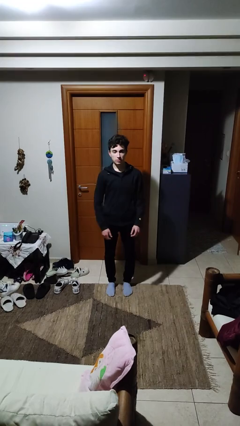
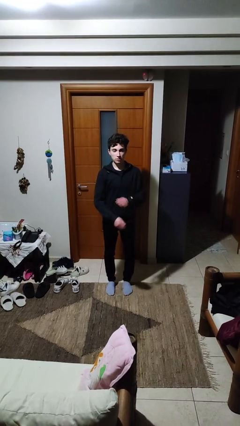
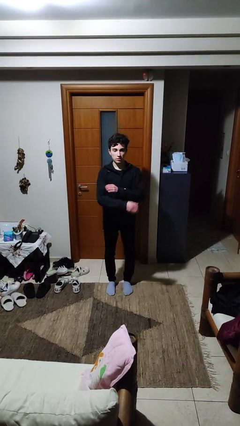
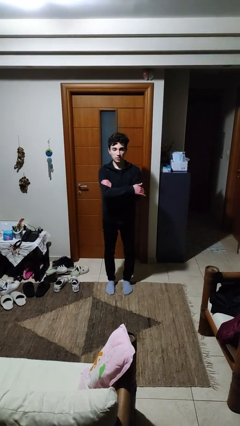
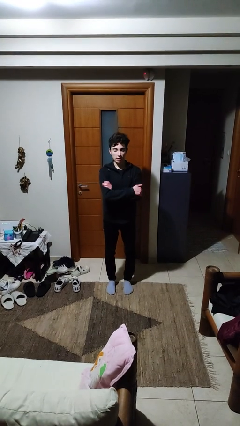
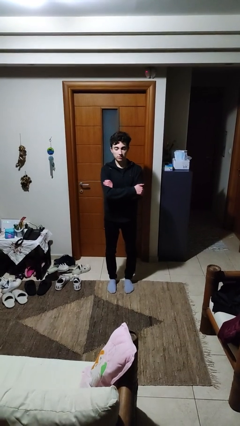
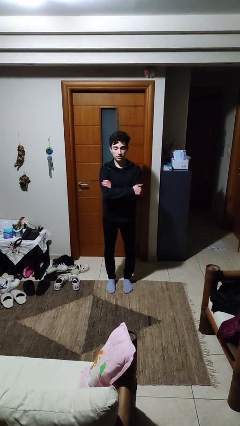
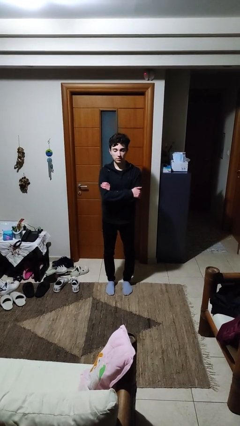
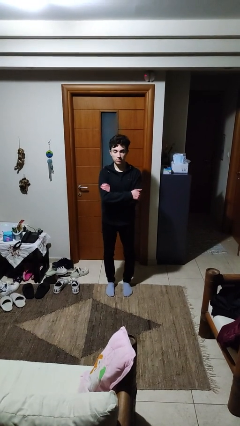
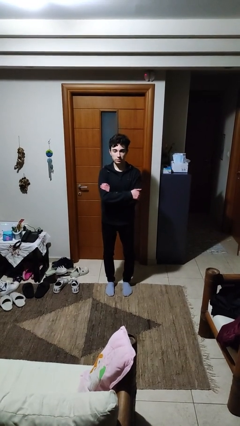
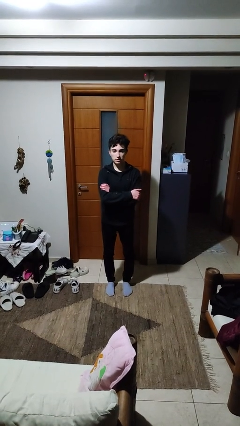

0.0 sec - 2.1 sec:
person crosses arms

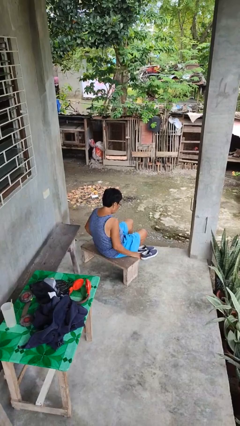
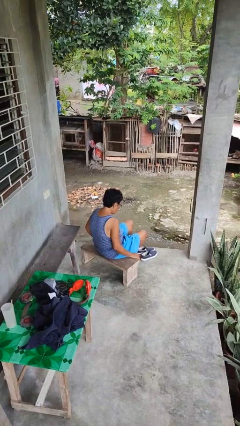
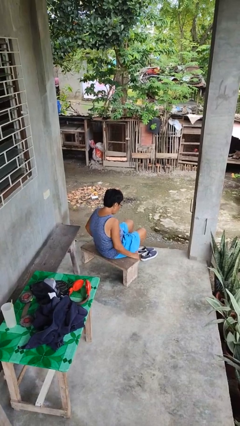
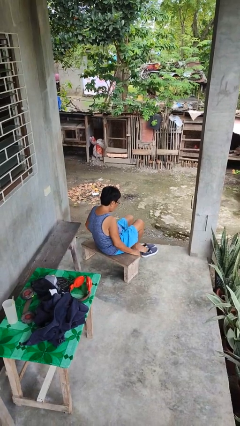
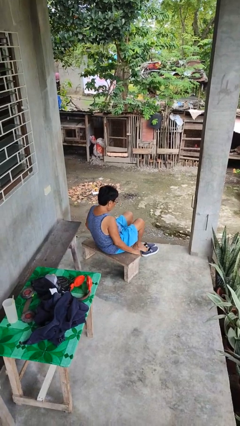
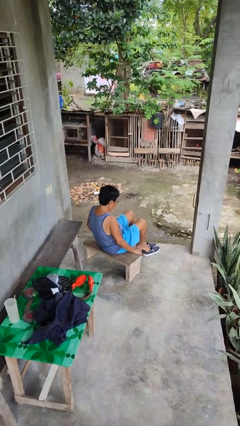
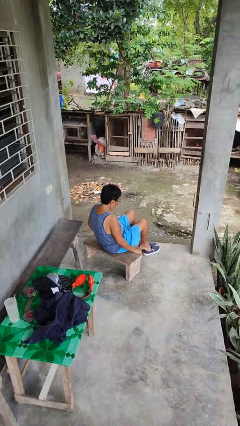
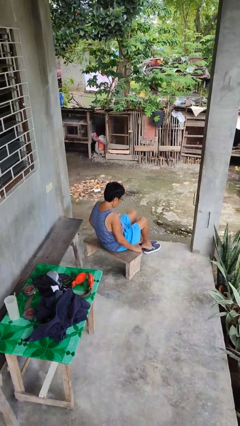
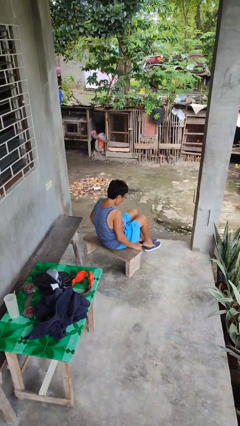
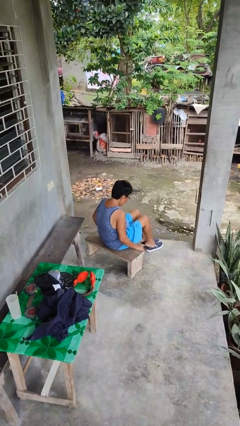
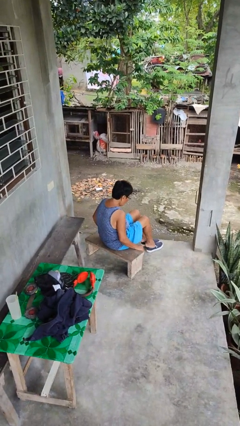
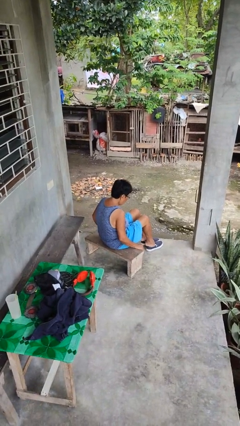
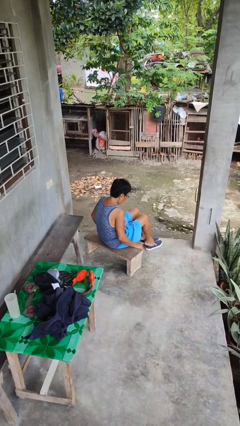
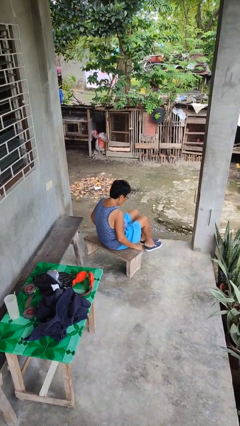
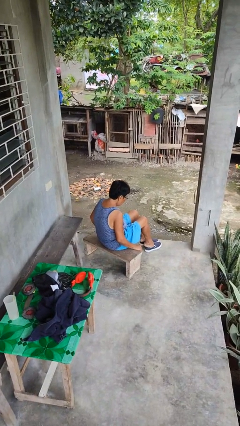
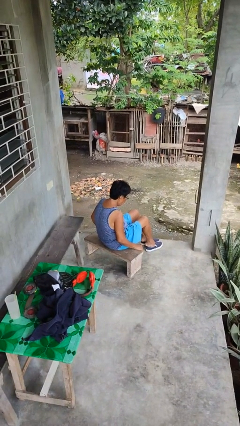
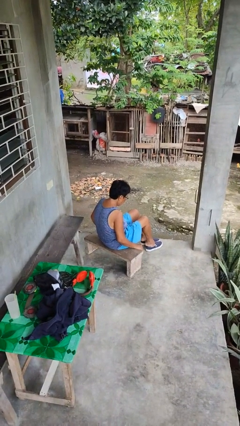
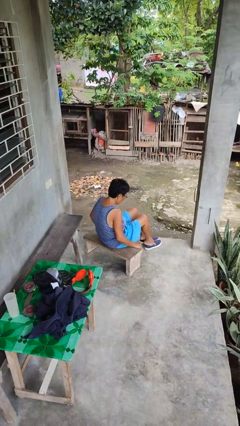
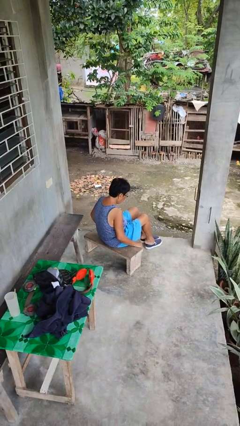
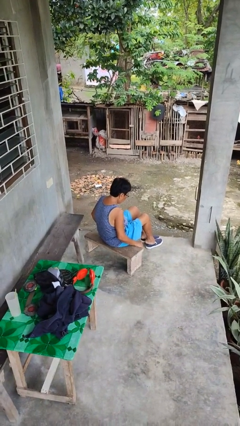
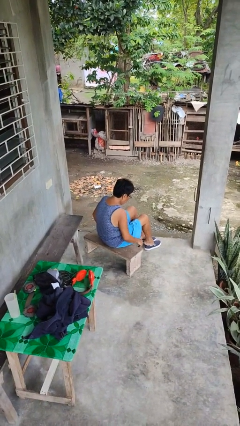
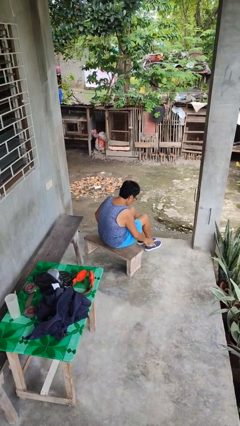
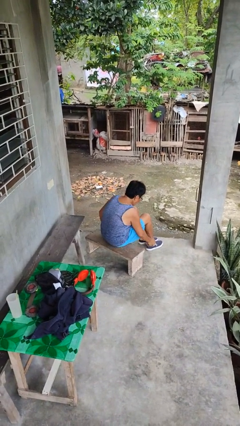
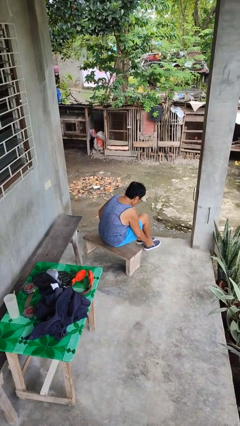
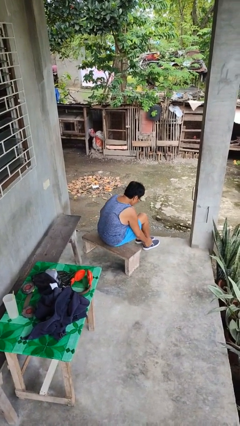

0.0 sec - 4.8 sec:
person puts on shoes

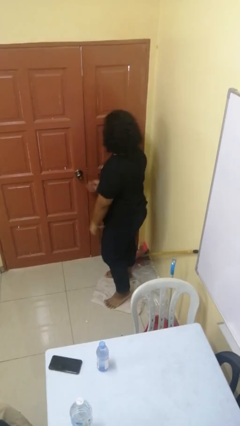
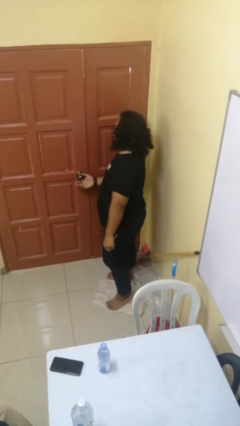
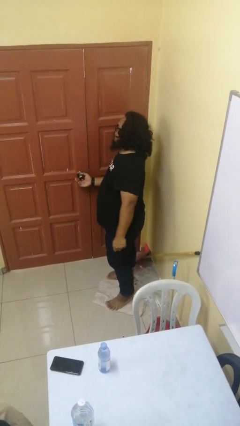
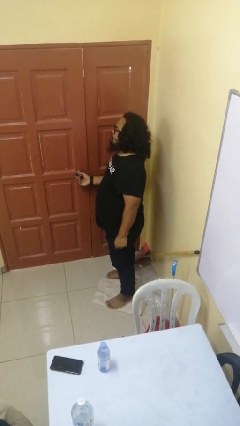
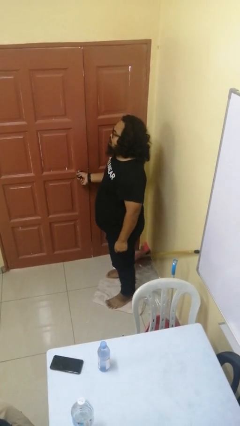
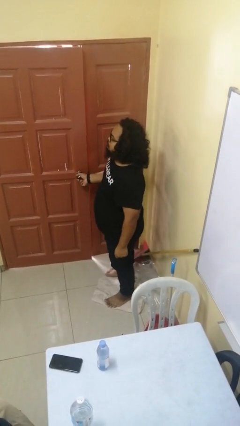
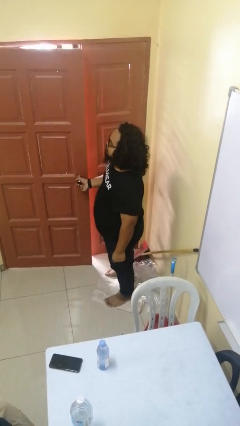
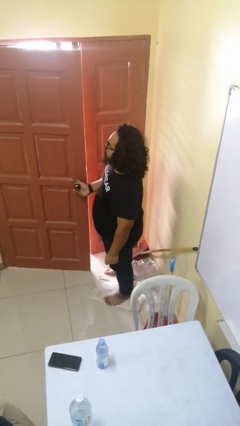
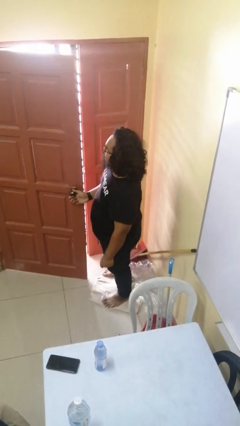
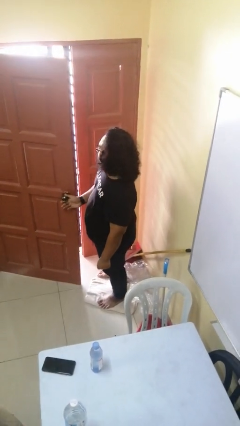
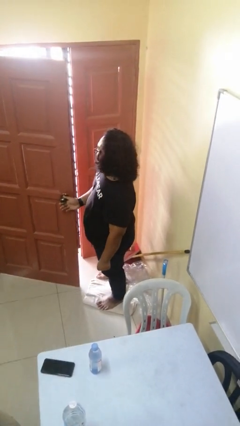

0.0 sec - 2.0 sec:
person opens facility door

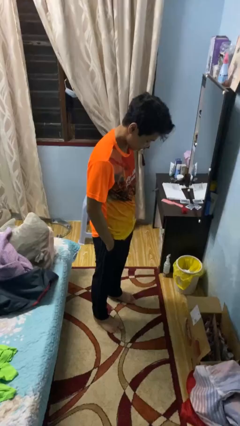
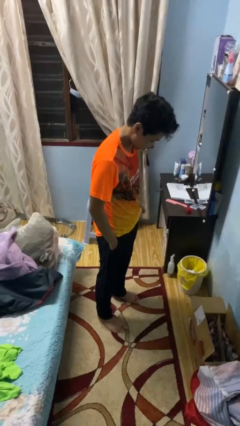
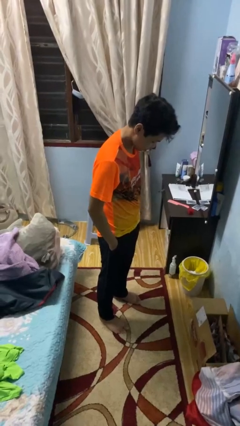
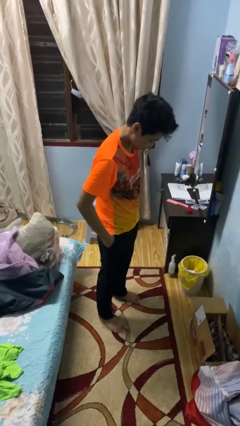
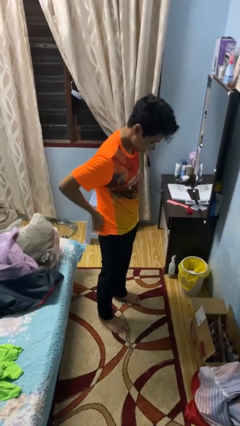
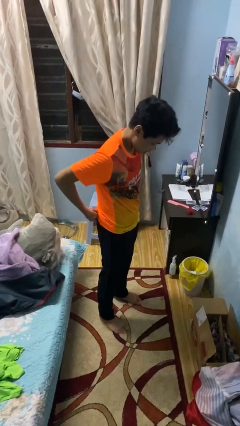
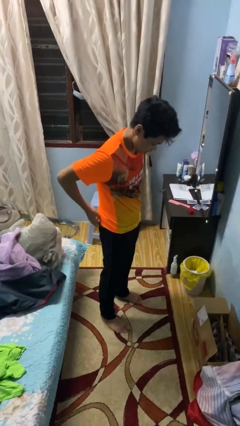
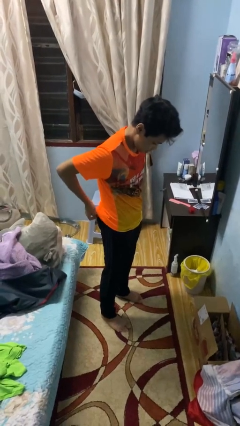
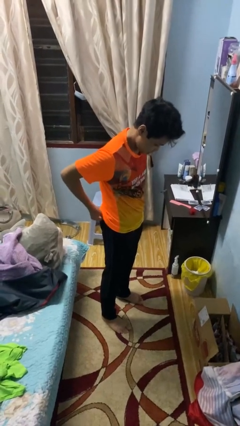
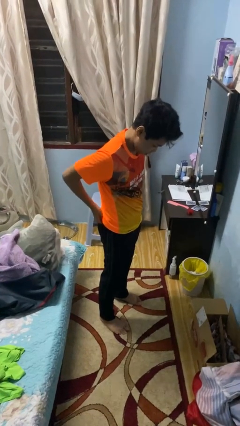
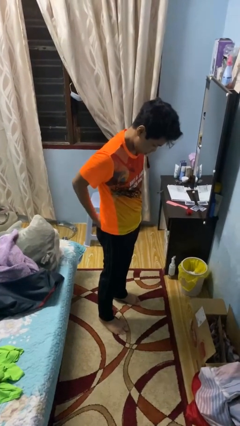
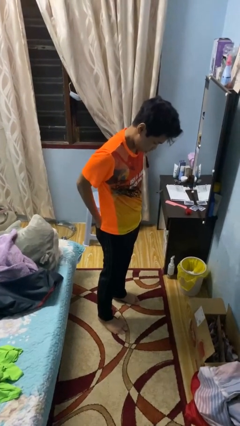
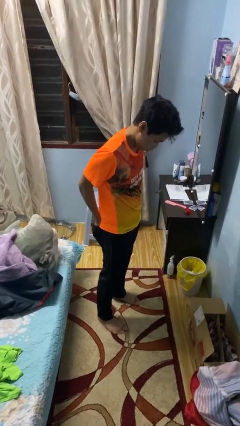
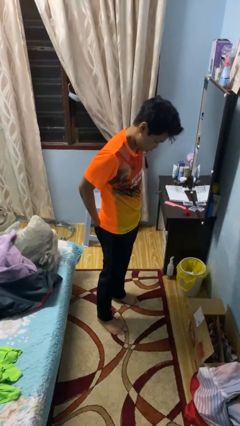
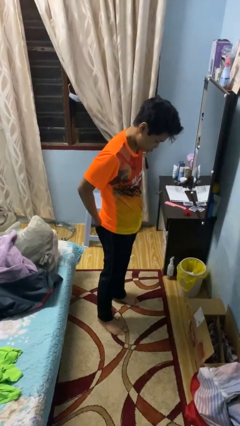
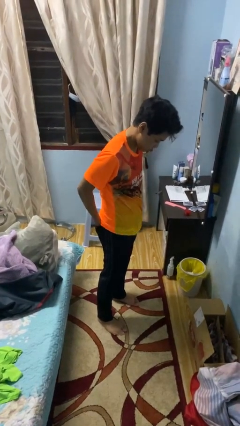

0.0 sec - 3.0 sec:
person puts hands in back pockets

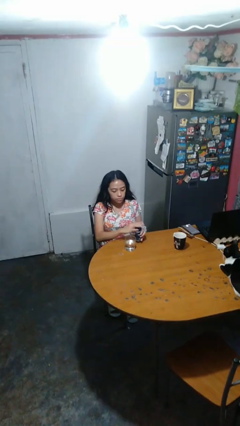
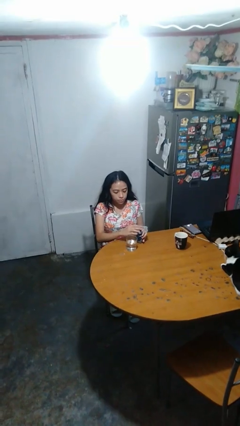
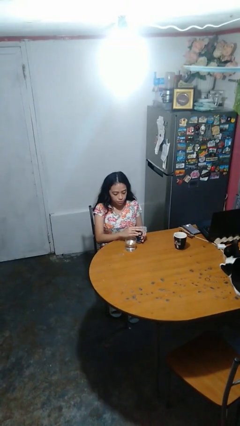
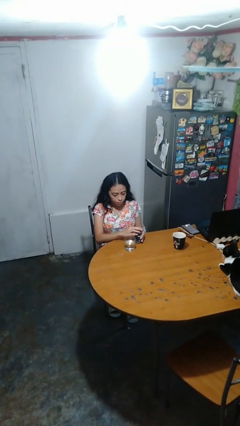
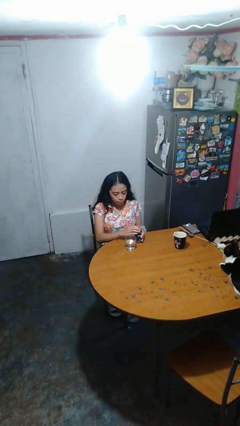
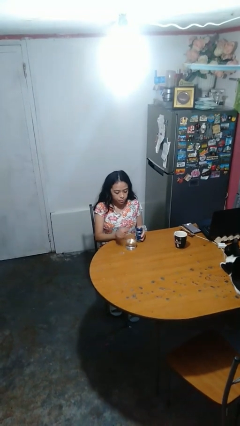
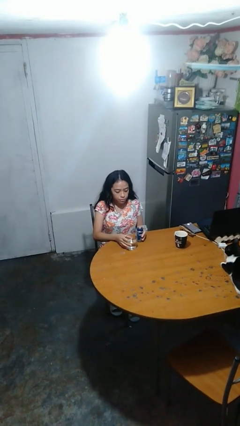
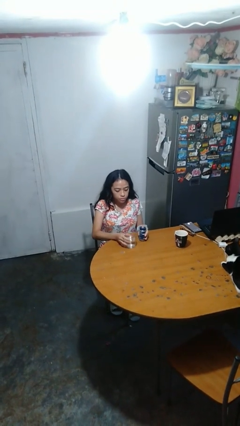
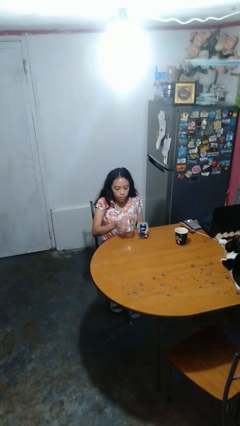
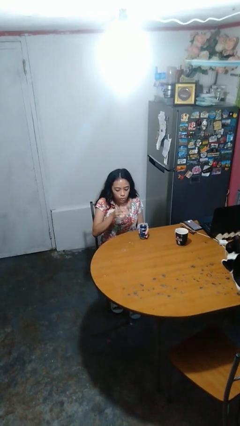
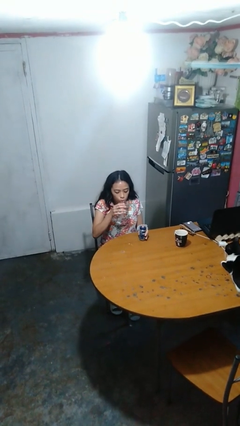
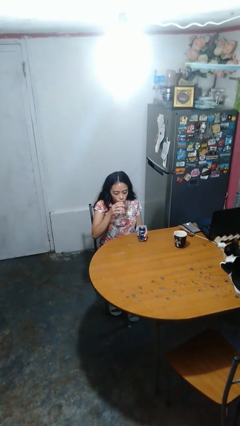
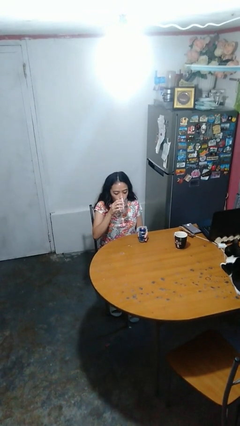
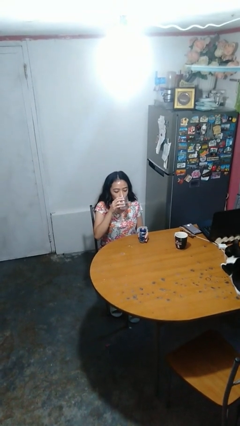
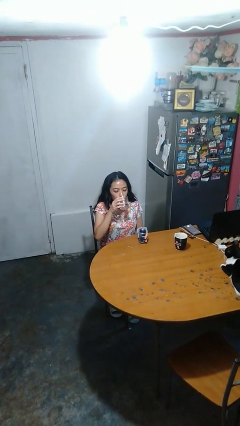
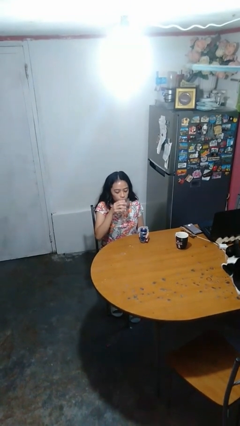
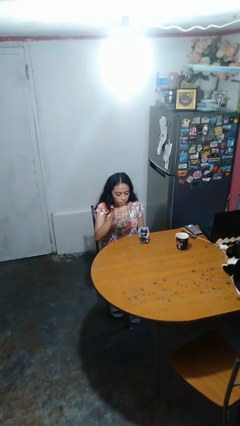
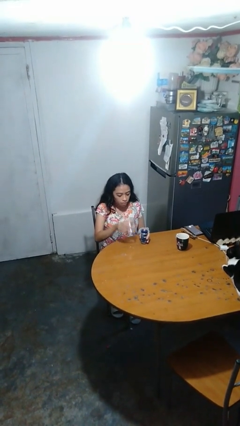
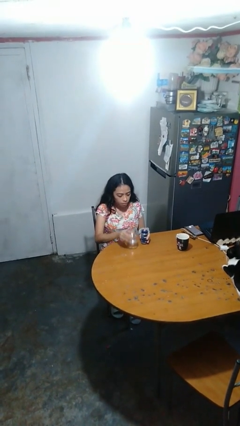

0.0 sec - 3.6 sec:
person drinks from cup

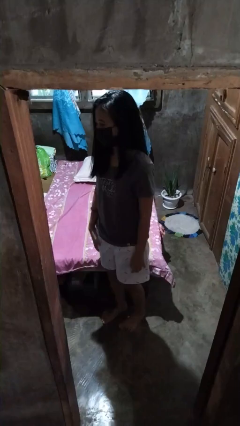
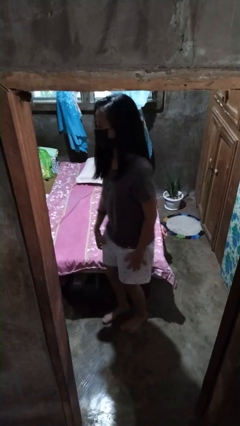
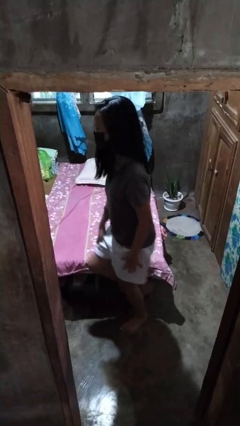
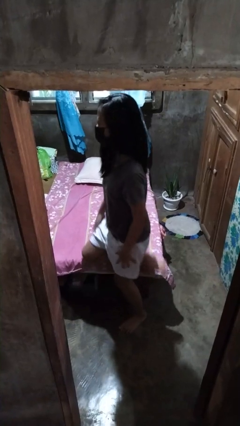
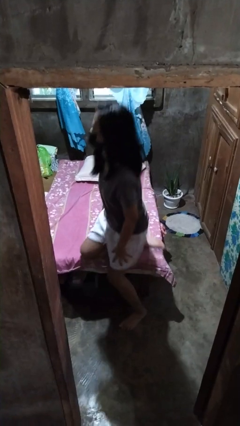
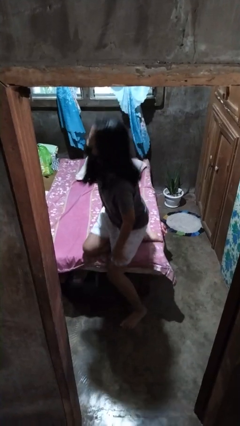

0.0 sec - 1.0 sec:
person lies down on bed

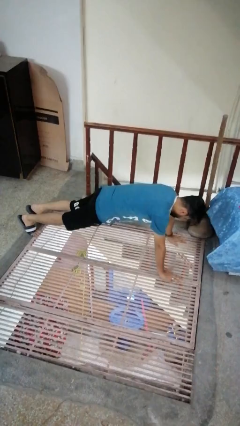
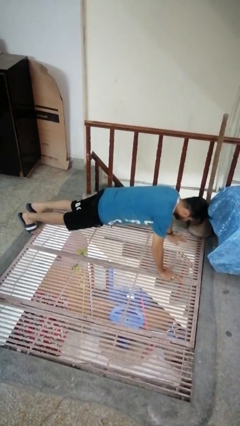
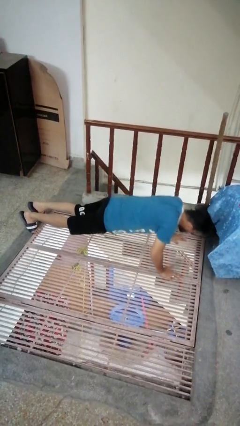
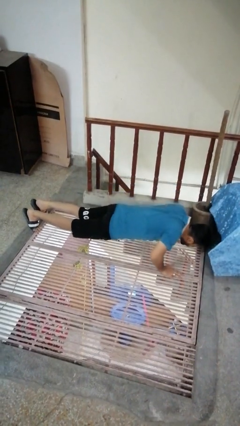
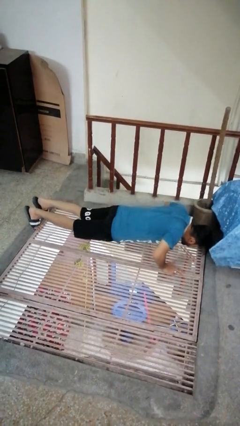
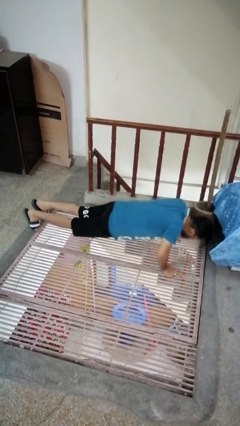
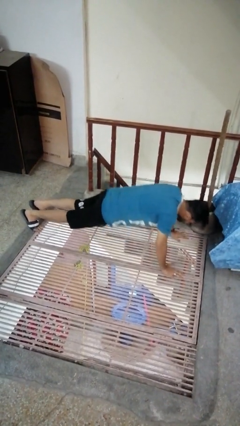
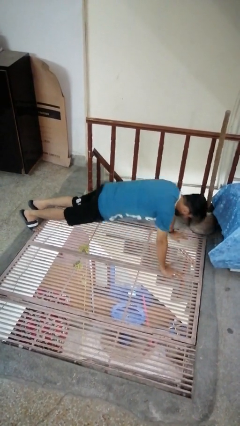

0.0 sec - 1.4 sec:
person exercises with pushup
